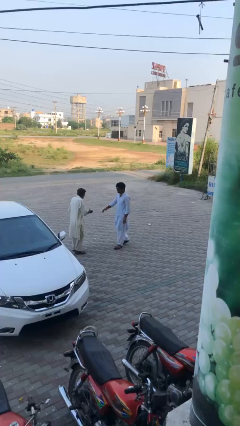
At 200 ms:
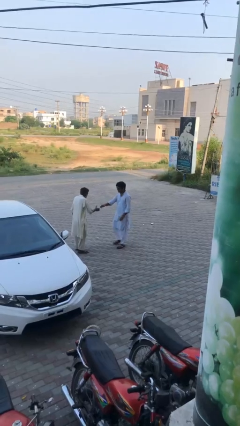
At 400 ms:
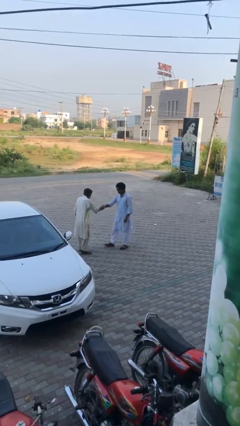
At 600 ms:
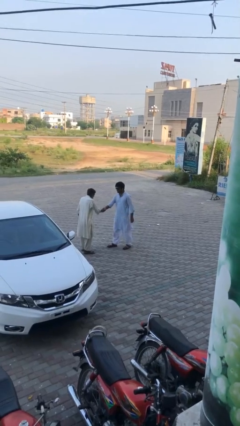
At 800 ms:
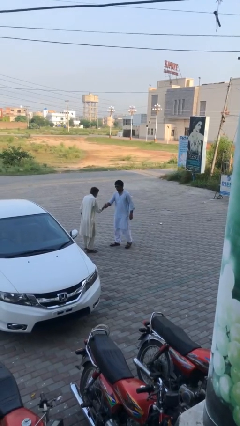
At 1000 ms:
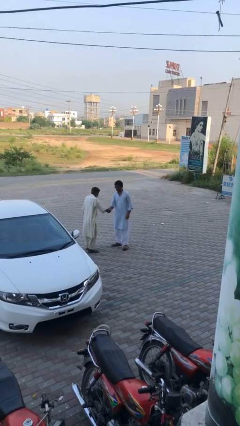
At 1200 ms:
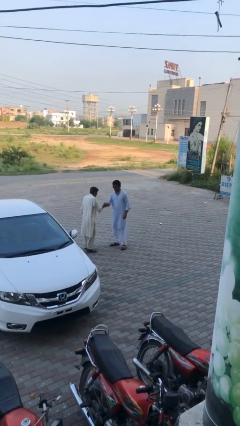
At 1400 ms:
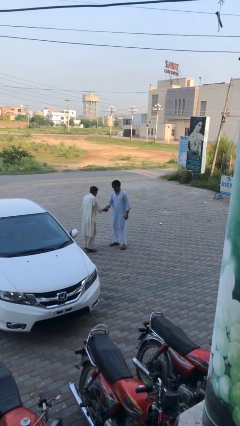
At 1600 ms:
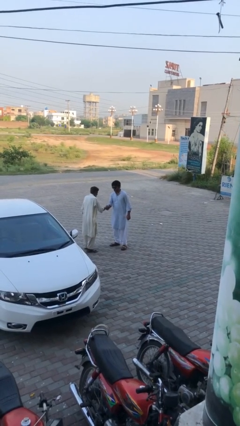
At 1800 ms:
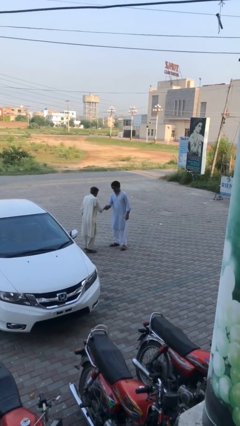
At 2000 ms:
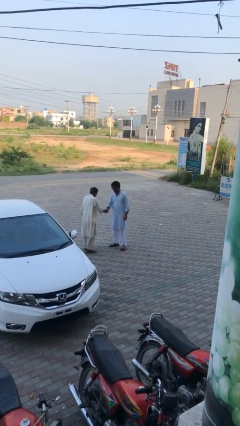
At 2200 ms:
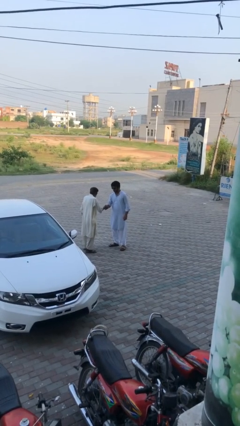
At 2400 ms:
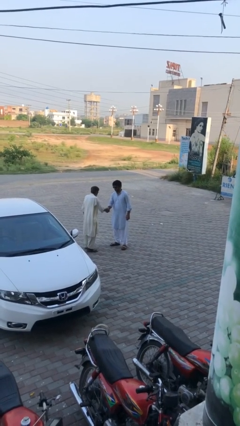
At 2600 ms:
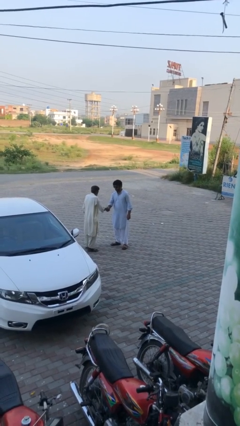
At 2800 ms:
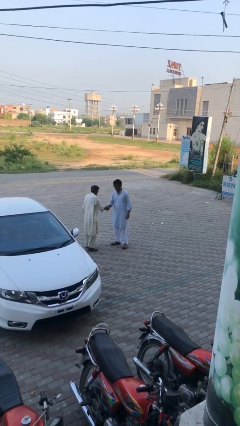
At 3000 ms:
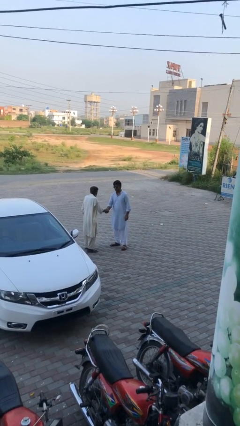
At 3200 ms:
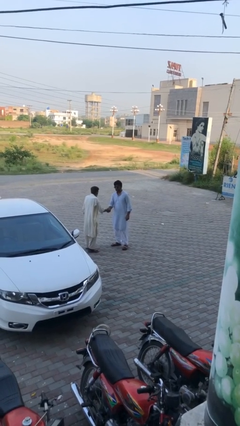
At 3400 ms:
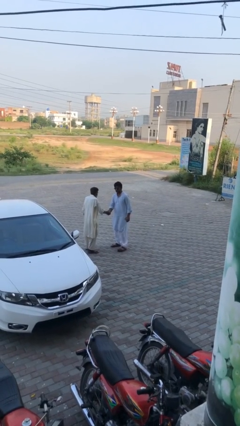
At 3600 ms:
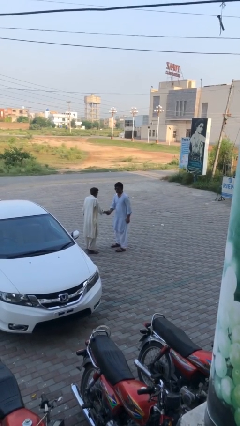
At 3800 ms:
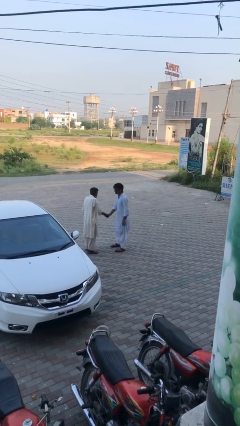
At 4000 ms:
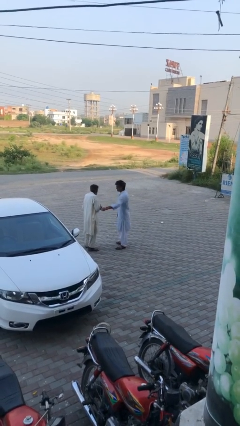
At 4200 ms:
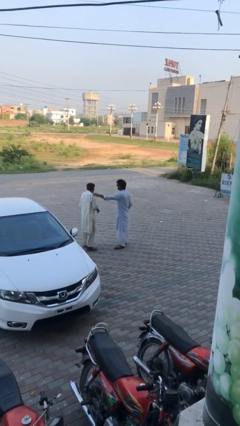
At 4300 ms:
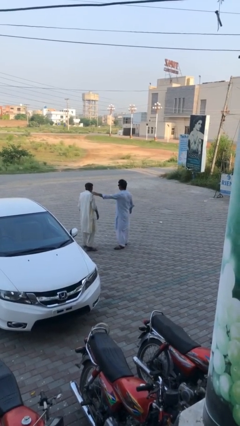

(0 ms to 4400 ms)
person shakes hand

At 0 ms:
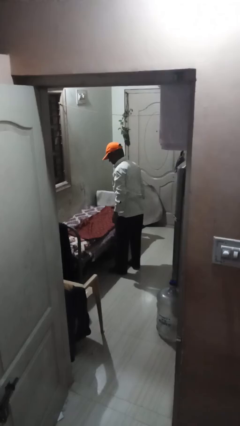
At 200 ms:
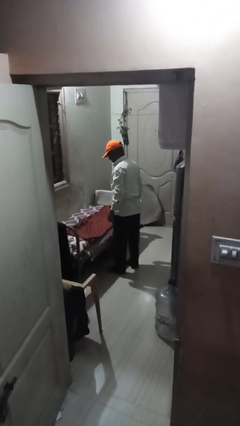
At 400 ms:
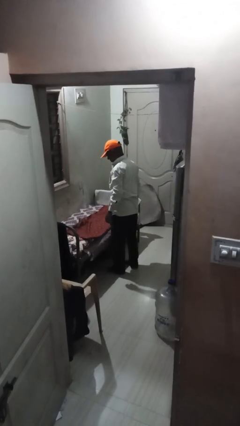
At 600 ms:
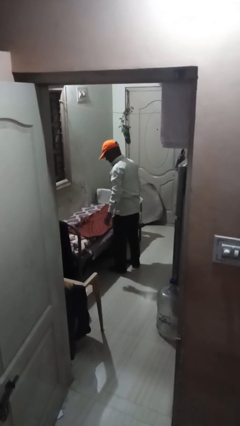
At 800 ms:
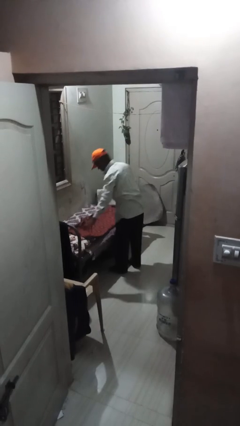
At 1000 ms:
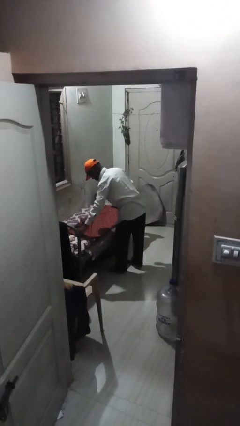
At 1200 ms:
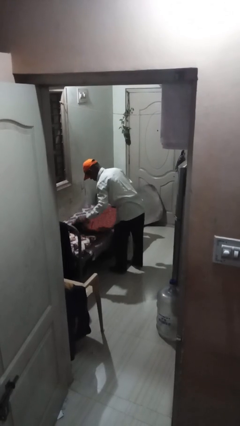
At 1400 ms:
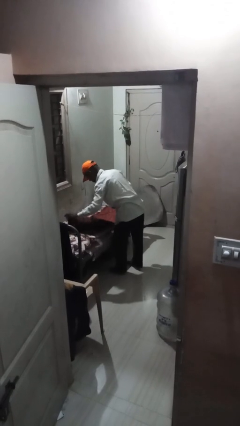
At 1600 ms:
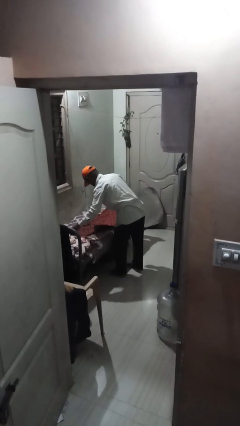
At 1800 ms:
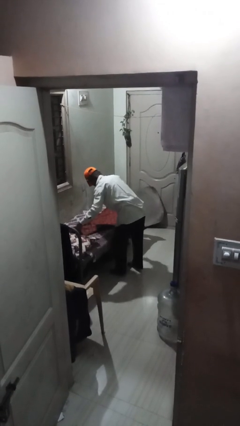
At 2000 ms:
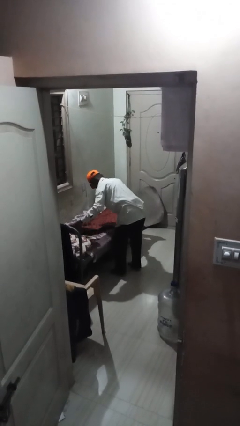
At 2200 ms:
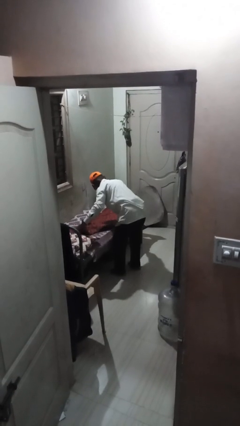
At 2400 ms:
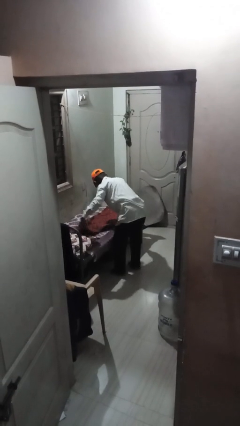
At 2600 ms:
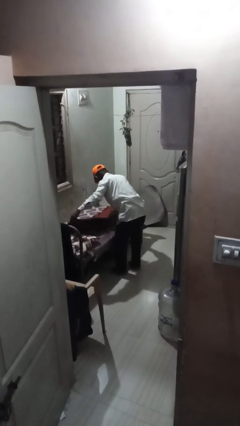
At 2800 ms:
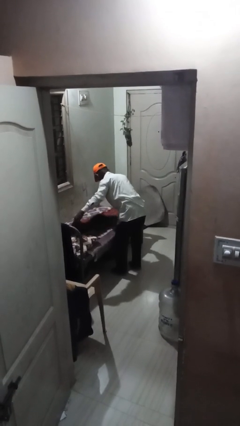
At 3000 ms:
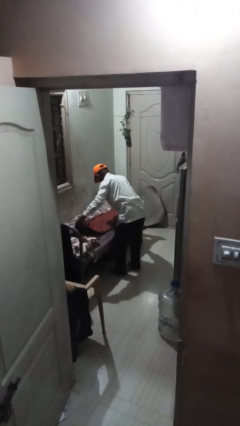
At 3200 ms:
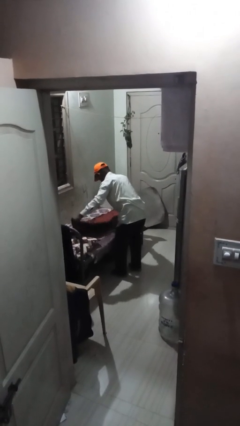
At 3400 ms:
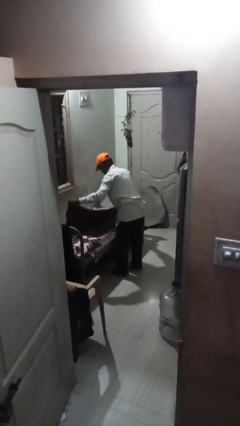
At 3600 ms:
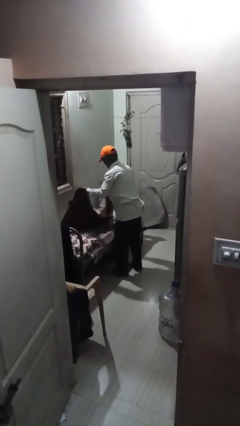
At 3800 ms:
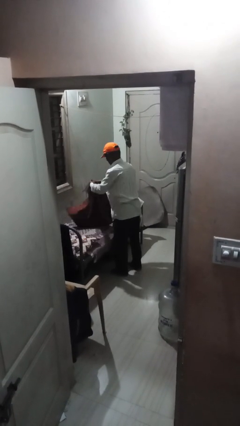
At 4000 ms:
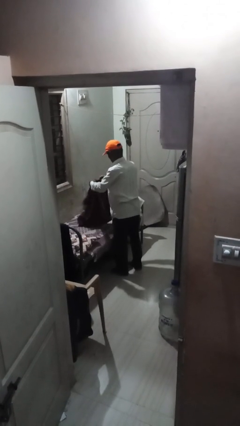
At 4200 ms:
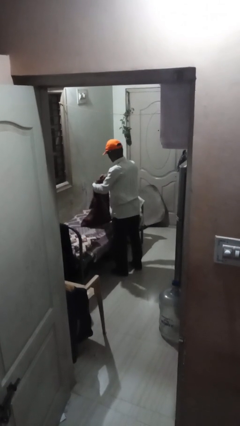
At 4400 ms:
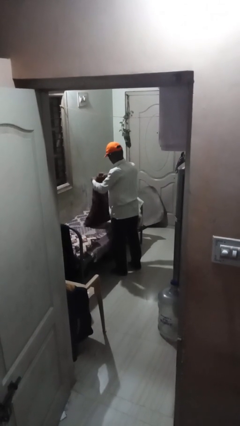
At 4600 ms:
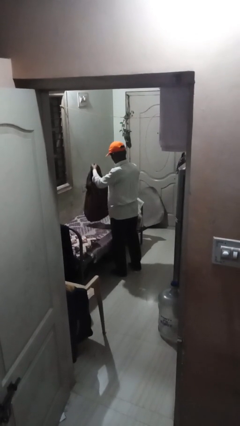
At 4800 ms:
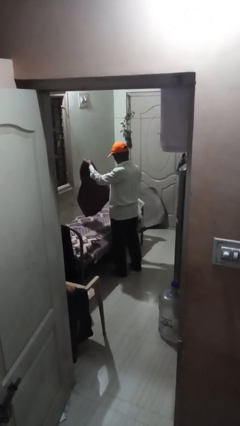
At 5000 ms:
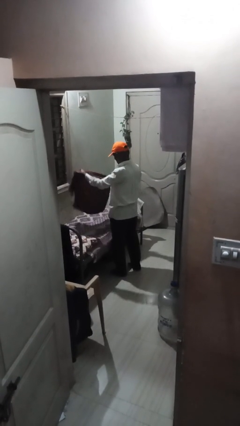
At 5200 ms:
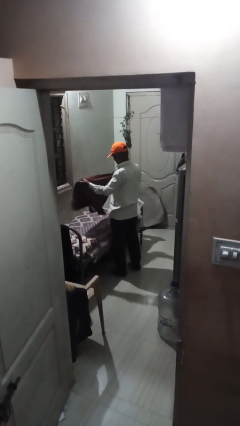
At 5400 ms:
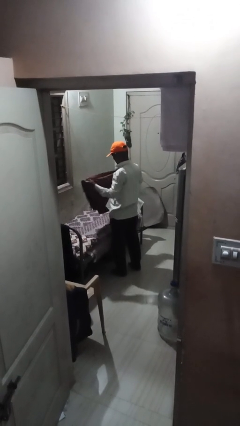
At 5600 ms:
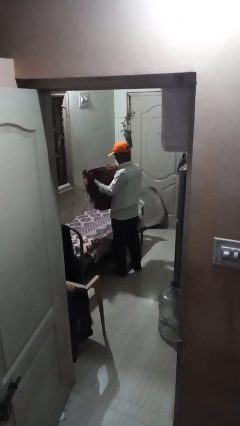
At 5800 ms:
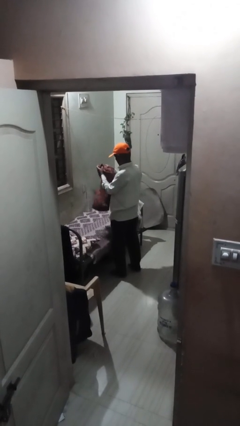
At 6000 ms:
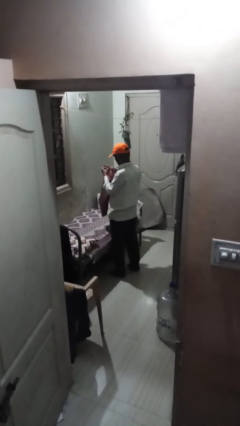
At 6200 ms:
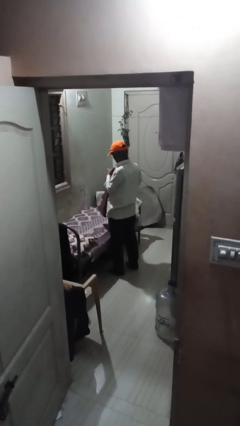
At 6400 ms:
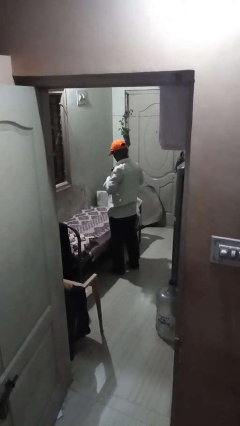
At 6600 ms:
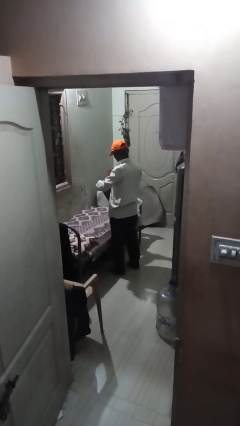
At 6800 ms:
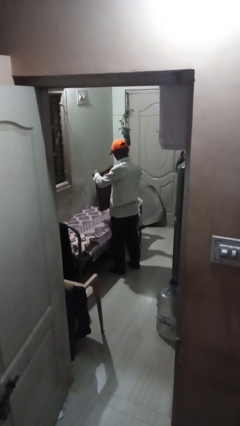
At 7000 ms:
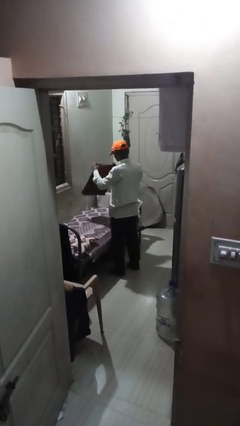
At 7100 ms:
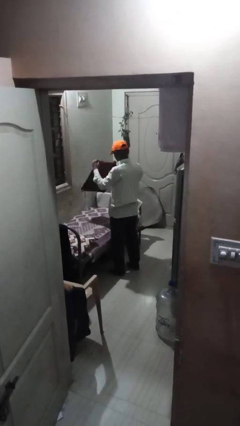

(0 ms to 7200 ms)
person folds blanket

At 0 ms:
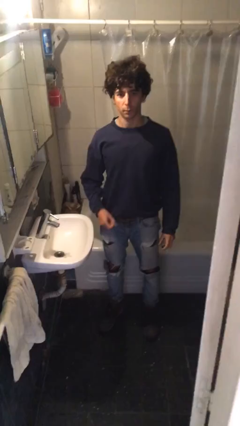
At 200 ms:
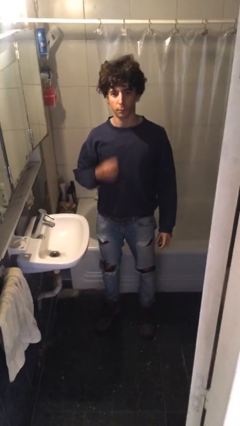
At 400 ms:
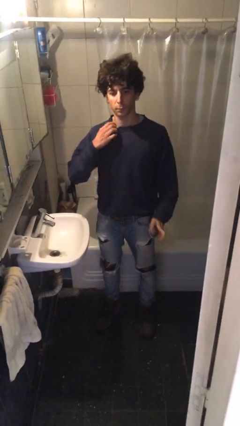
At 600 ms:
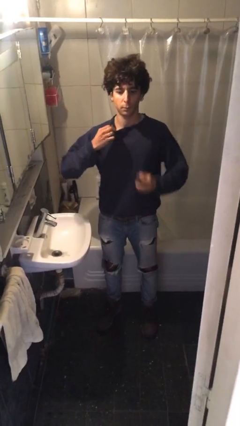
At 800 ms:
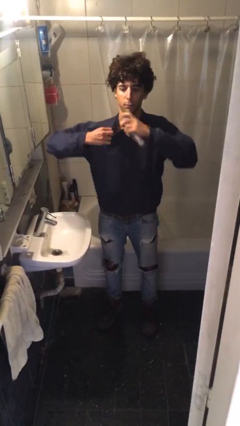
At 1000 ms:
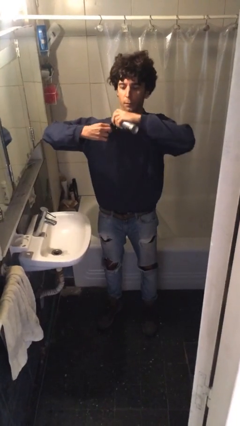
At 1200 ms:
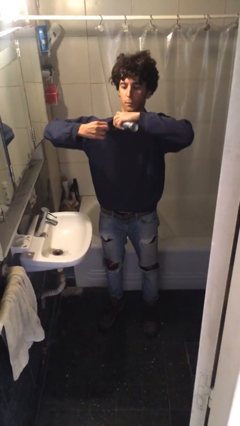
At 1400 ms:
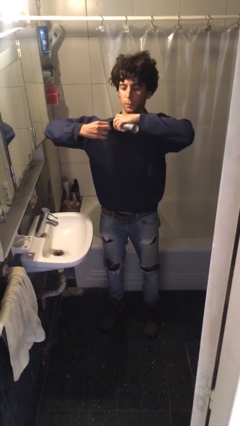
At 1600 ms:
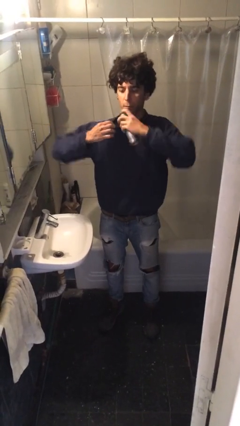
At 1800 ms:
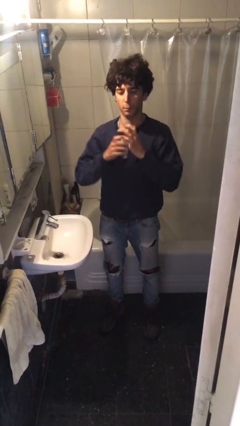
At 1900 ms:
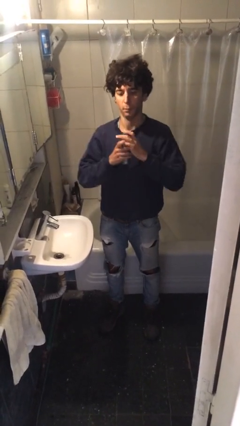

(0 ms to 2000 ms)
person applies deodorant

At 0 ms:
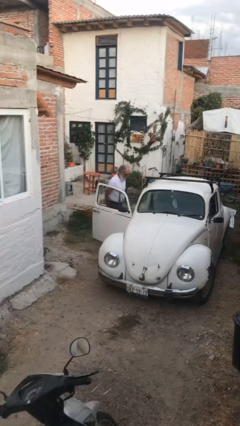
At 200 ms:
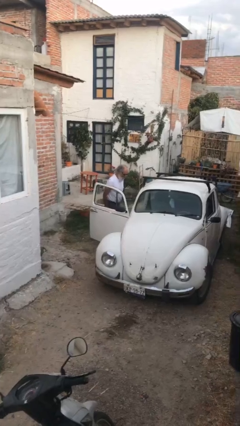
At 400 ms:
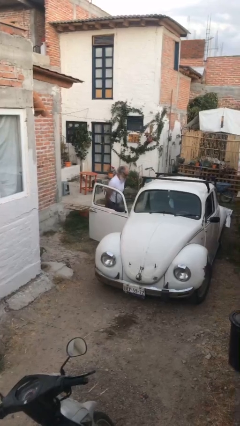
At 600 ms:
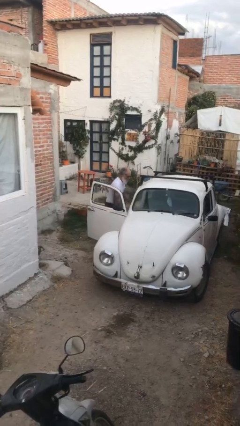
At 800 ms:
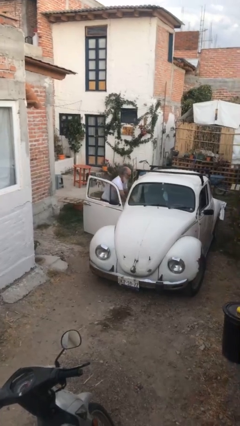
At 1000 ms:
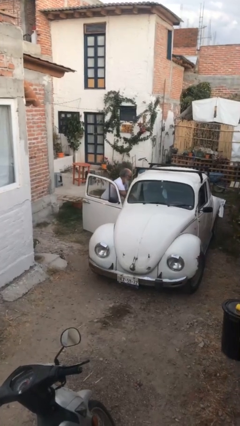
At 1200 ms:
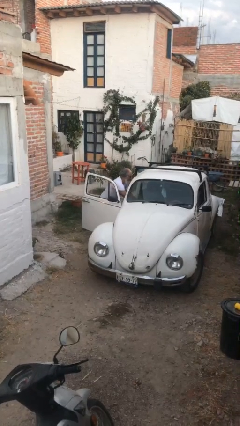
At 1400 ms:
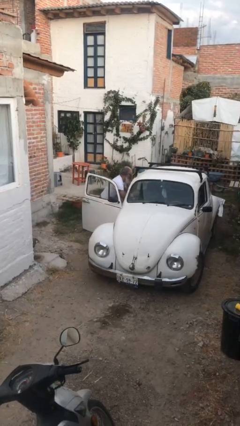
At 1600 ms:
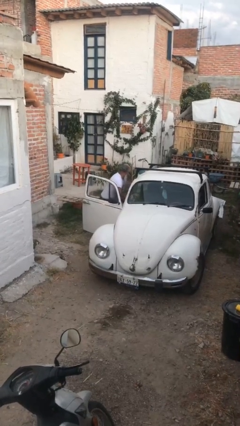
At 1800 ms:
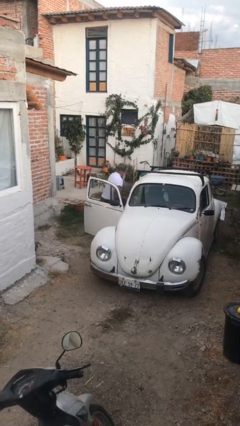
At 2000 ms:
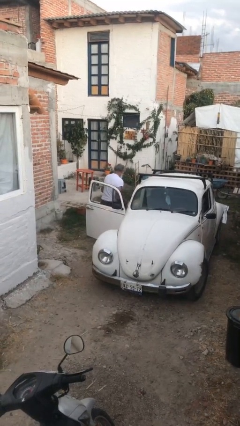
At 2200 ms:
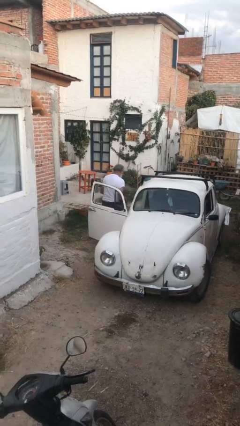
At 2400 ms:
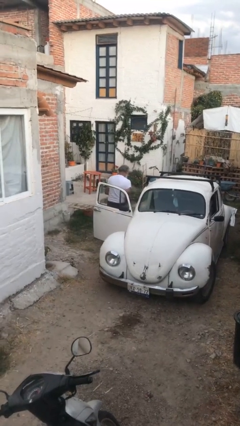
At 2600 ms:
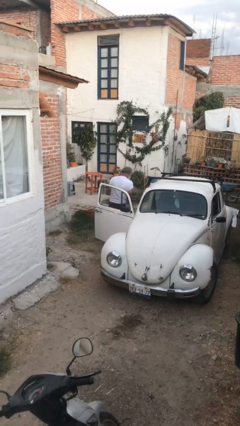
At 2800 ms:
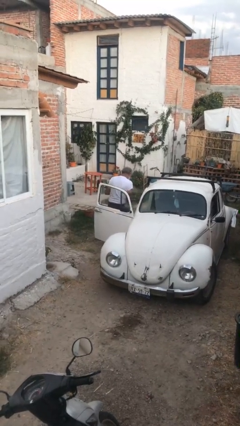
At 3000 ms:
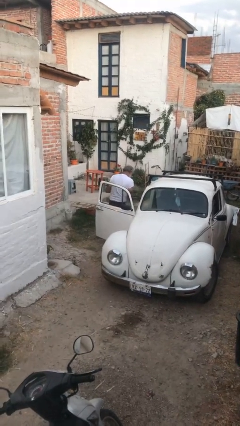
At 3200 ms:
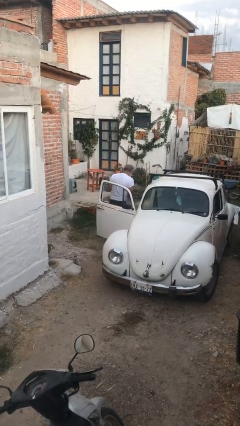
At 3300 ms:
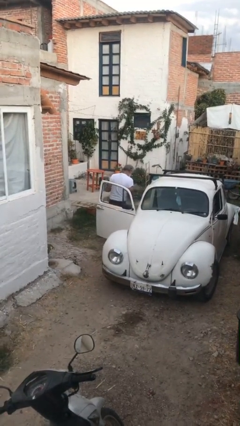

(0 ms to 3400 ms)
person unloads car

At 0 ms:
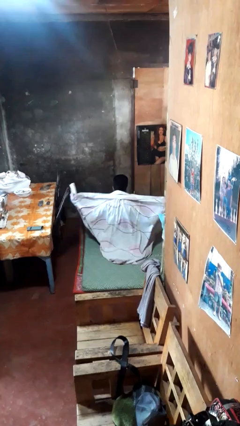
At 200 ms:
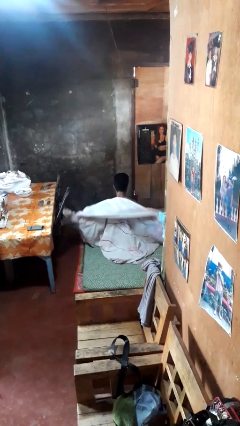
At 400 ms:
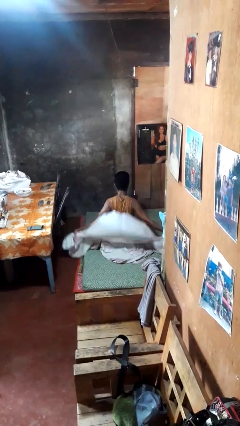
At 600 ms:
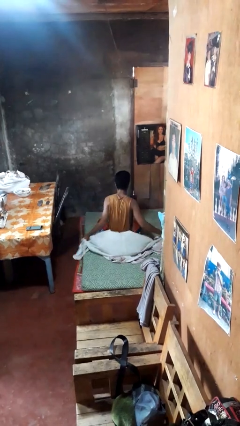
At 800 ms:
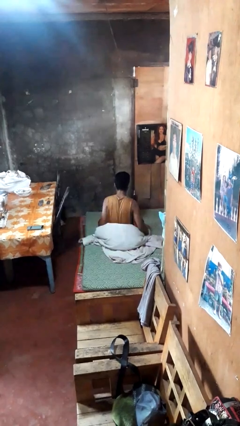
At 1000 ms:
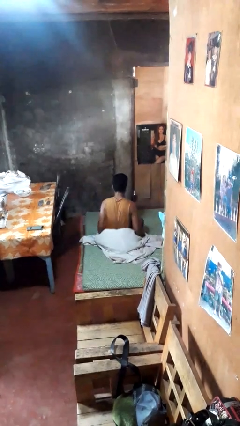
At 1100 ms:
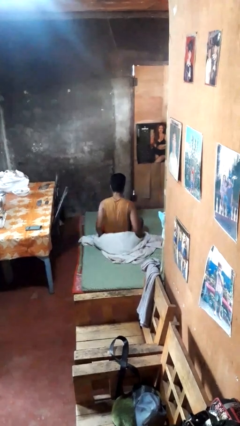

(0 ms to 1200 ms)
person uncovers with blanket
